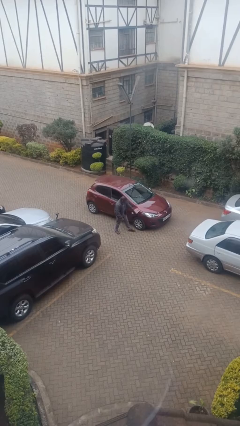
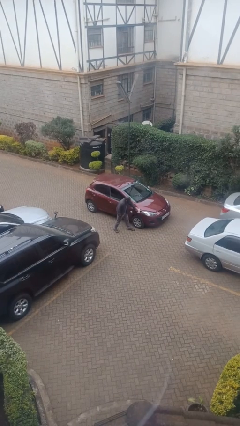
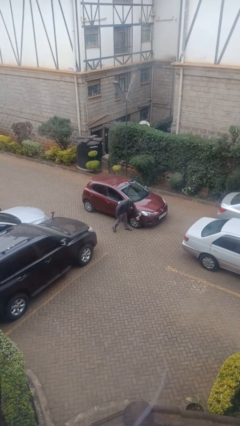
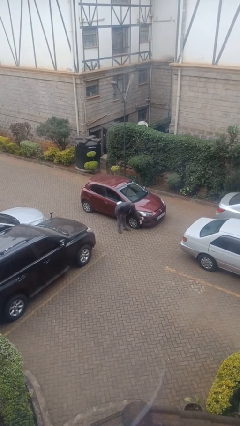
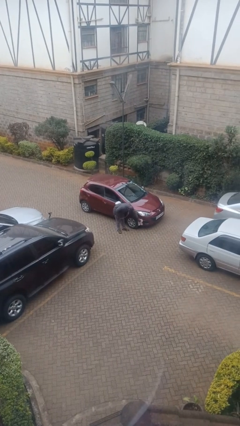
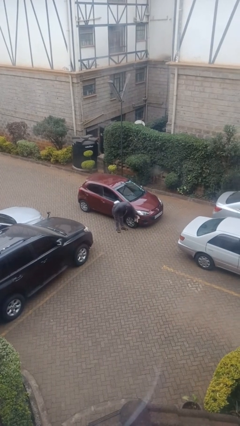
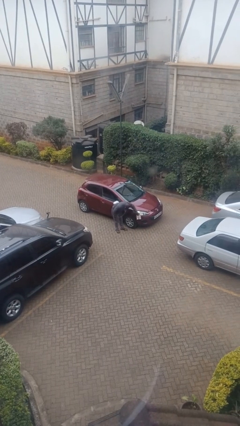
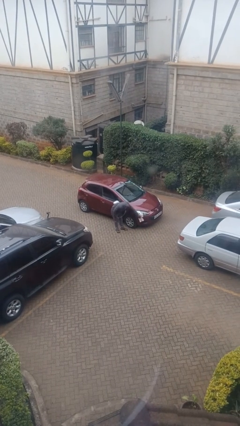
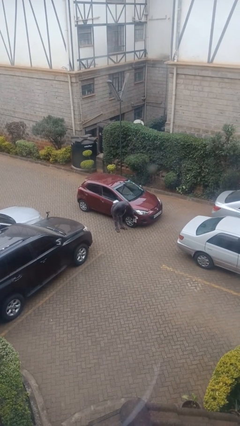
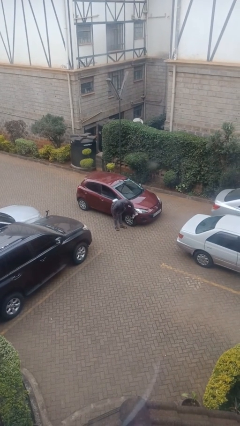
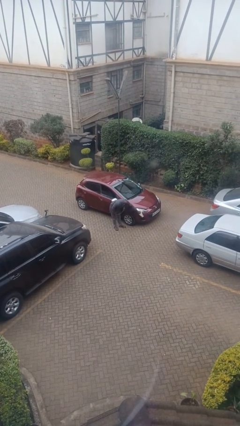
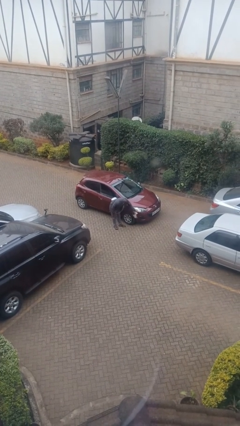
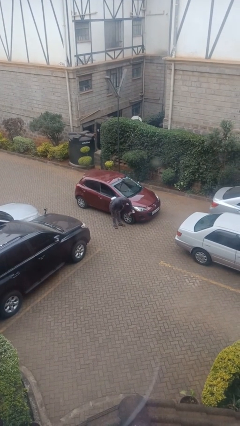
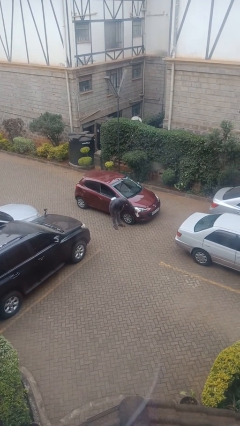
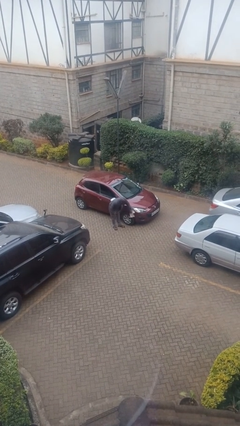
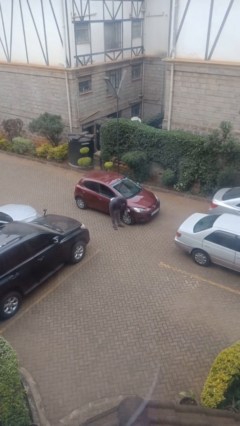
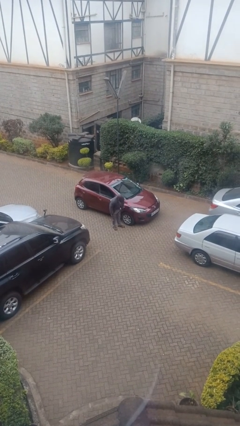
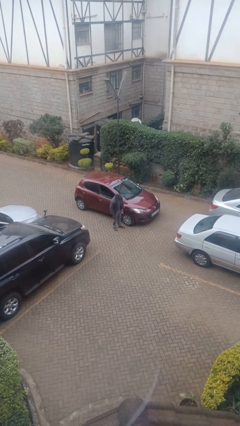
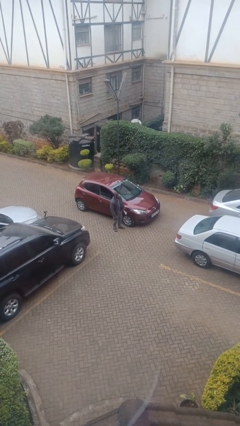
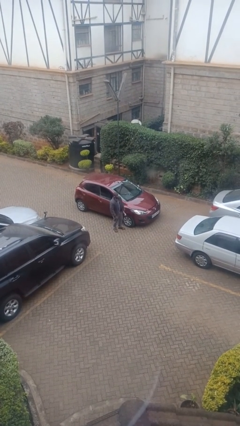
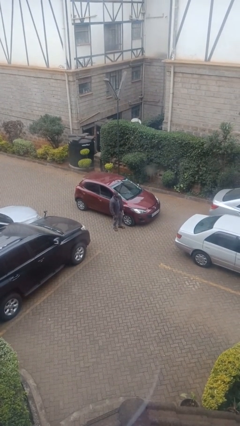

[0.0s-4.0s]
person polishes car with rag

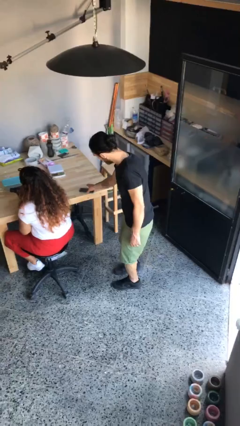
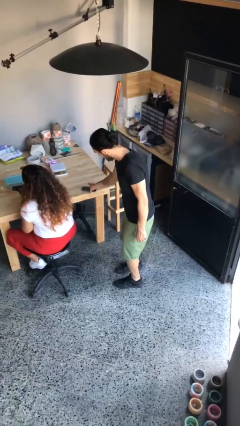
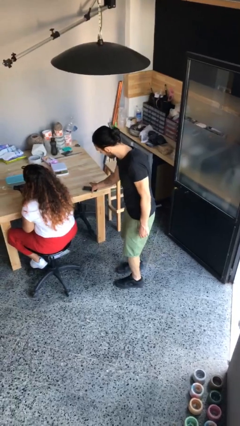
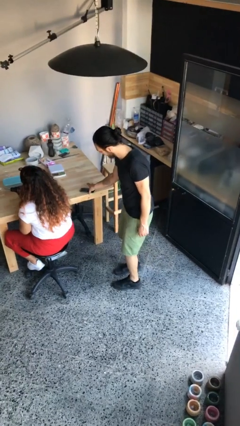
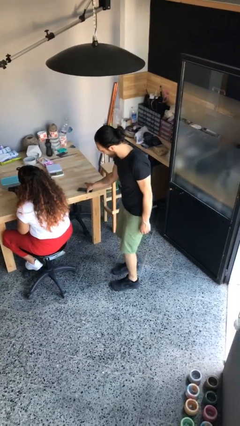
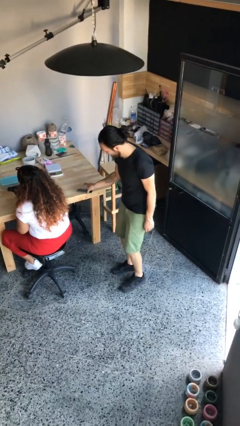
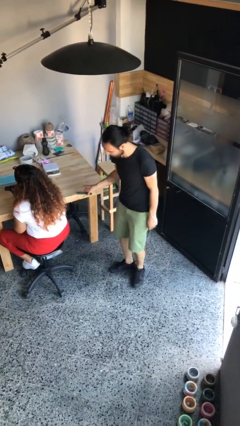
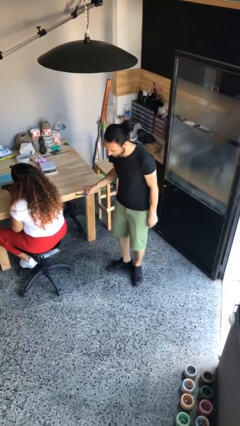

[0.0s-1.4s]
person steals object from person

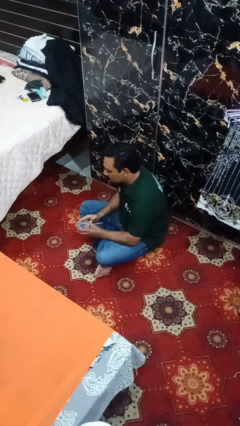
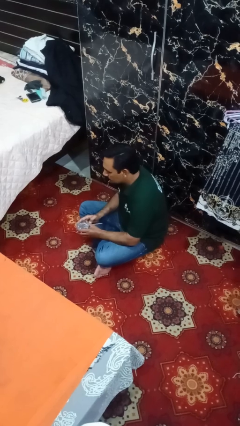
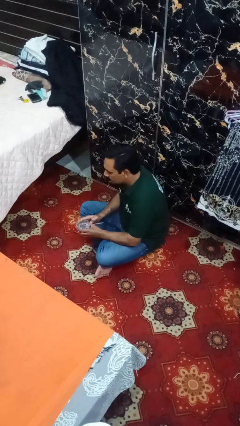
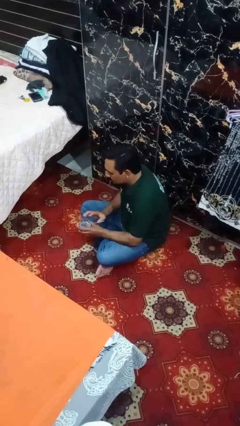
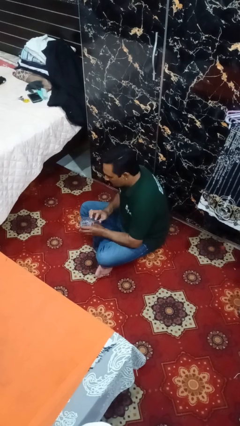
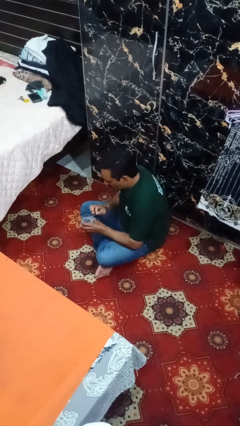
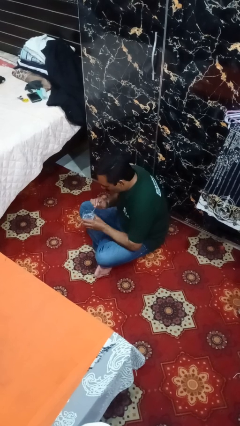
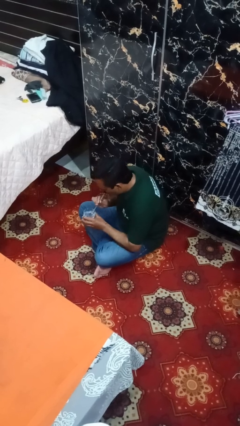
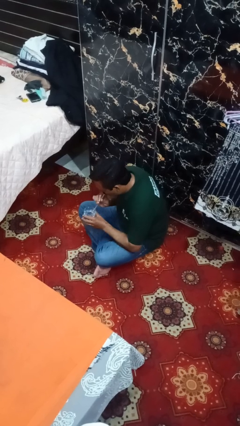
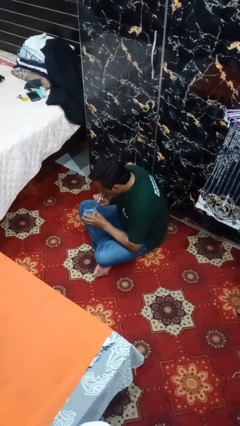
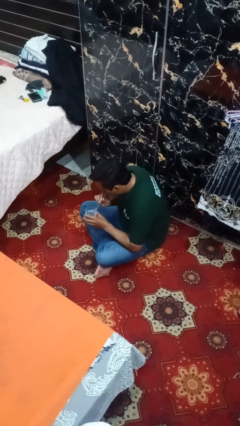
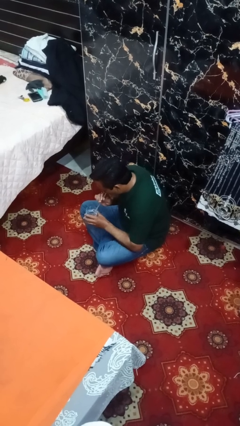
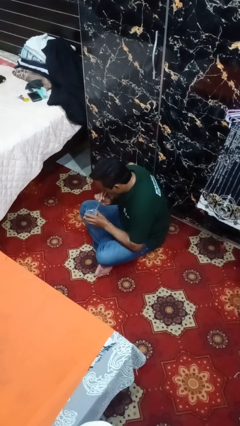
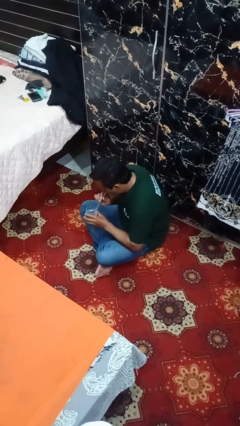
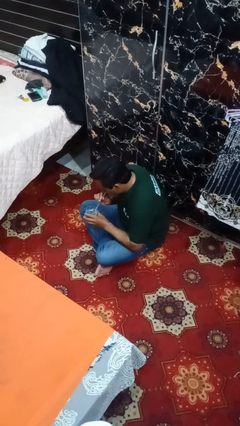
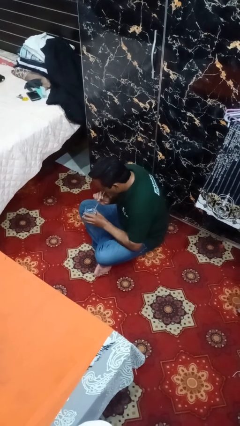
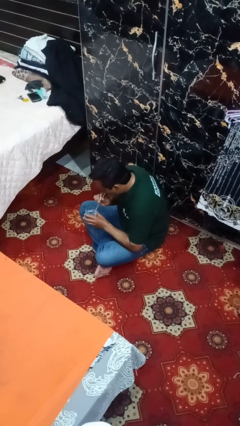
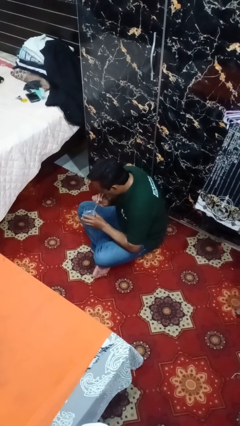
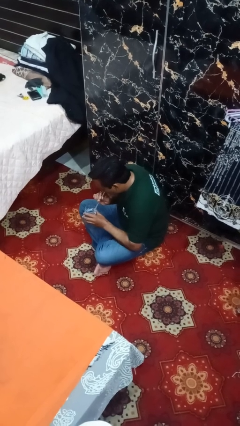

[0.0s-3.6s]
person drinks from straw

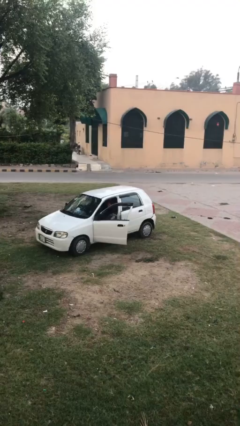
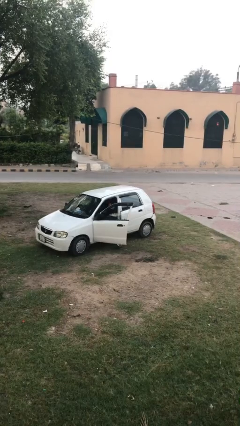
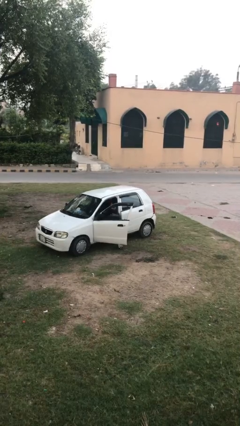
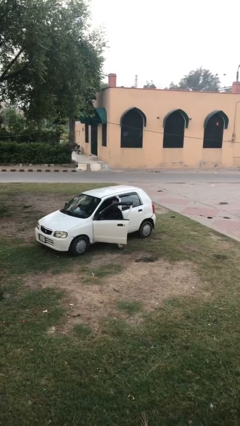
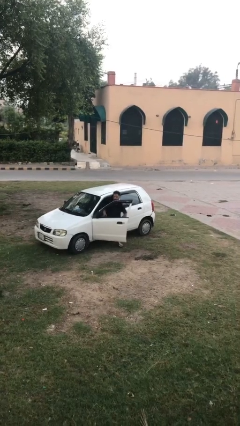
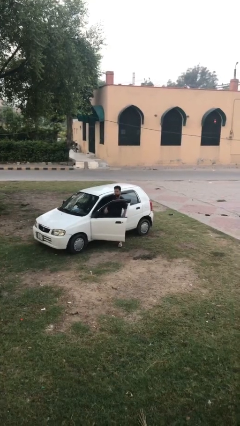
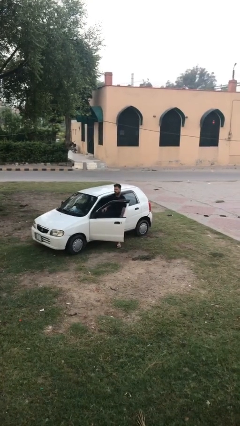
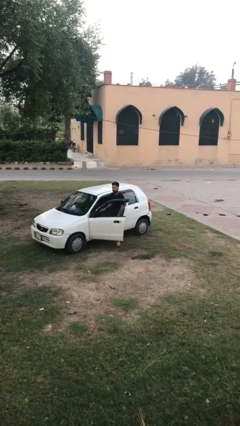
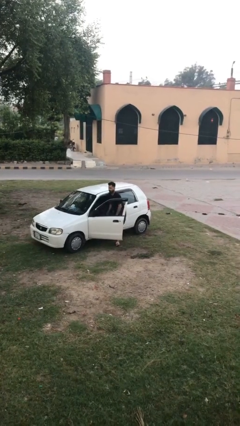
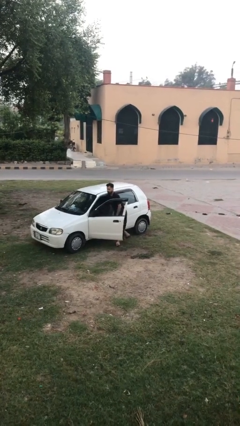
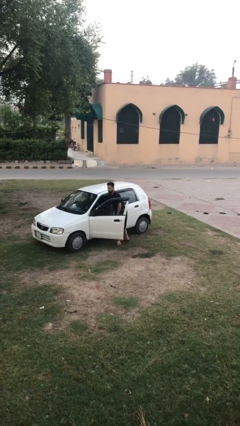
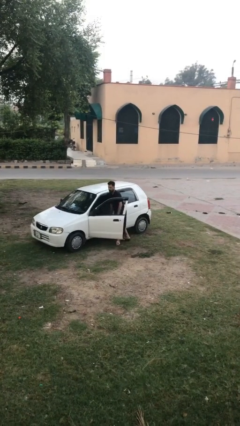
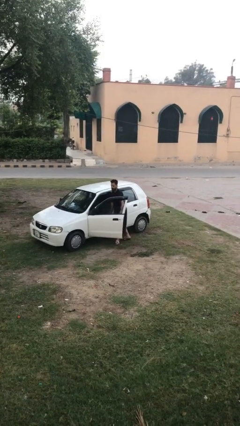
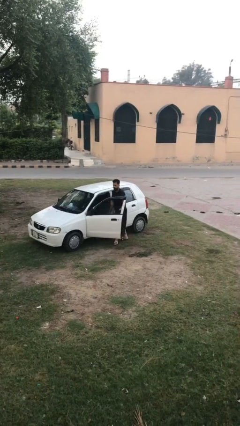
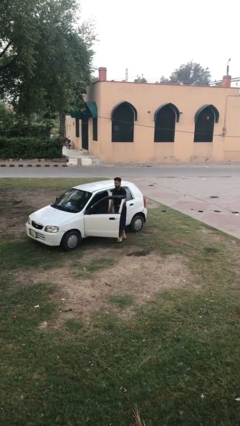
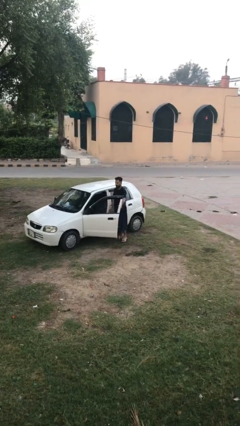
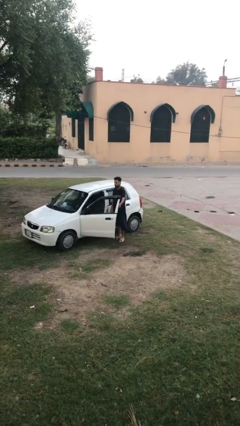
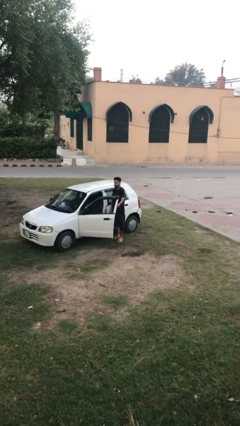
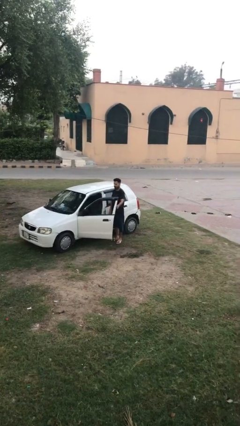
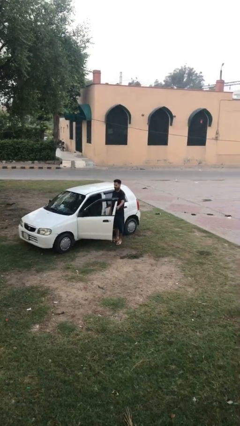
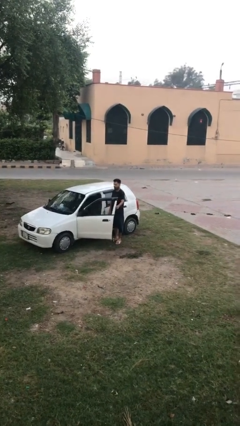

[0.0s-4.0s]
person exits car

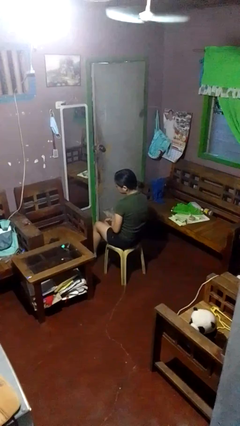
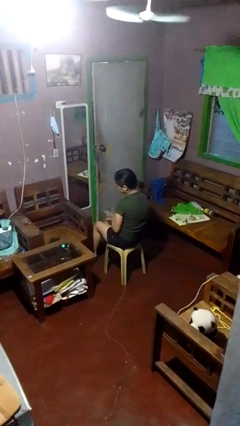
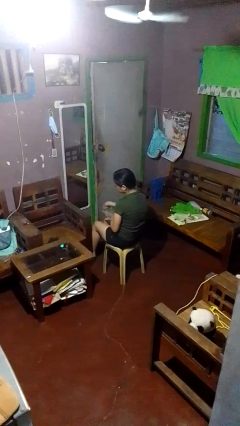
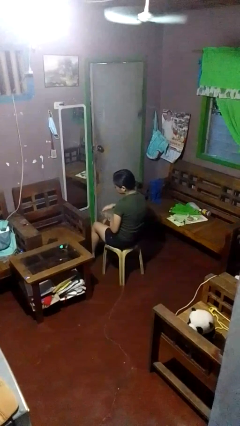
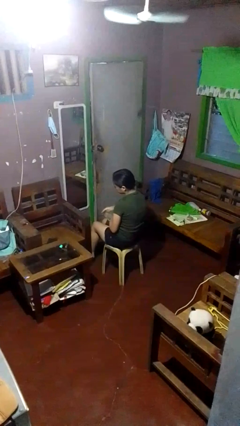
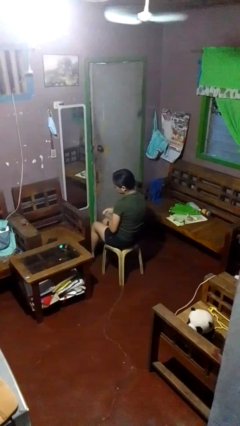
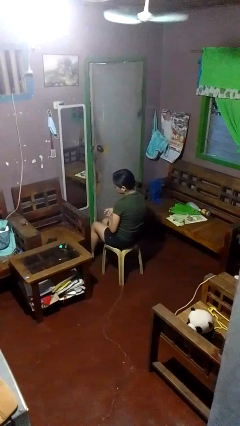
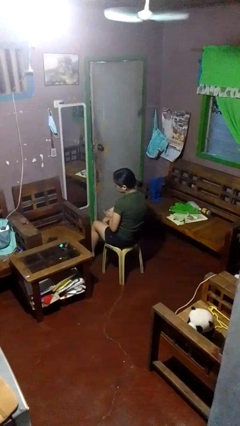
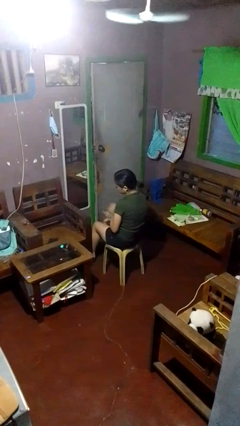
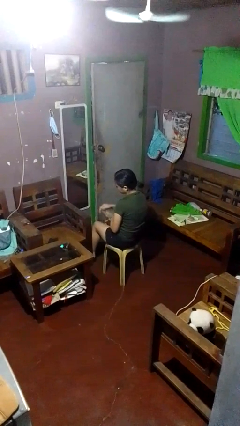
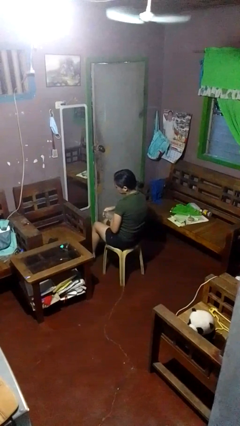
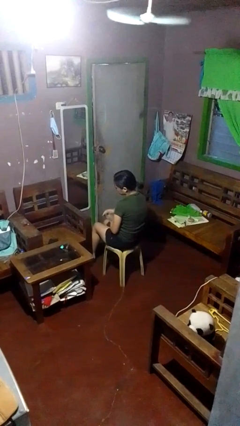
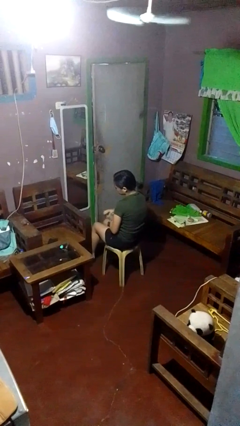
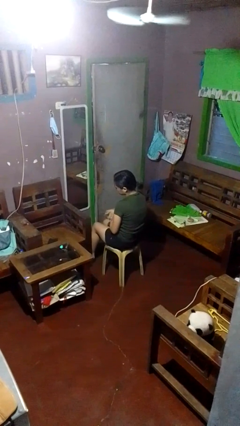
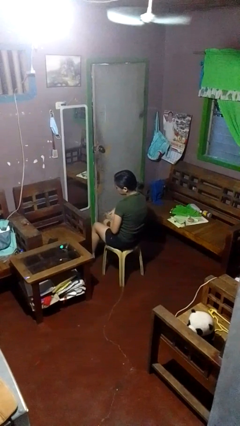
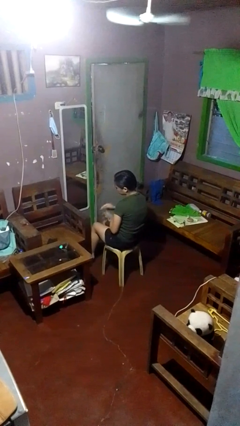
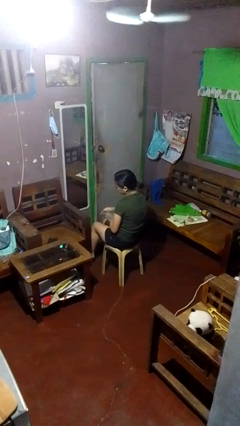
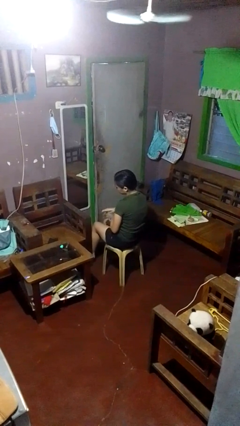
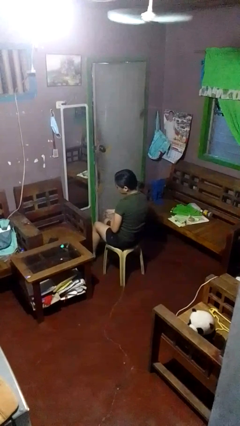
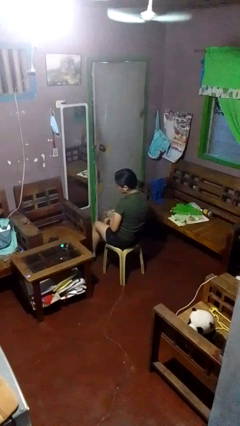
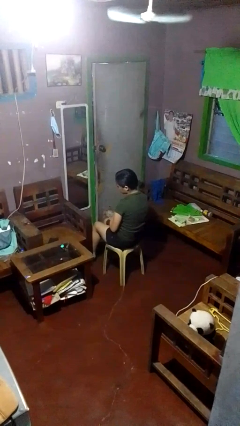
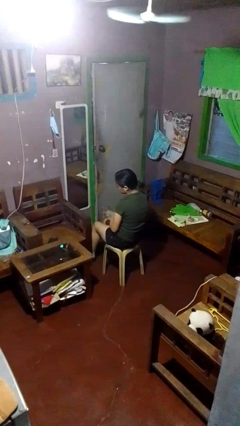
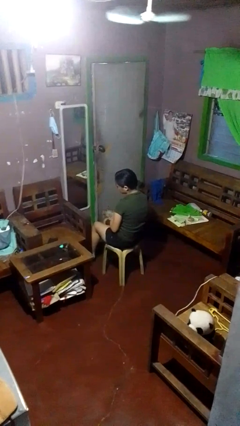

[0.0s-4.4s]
person pets cat
